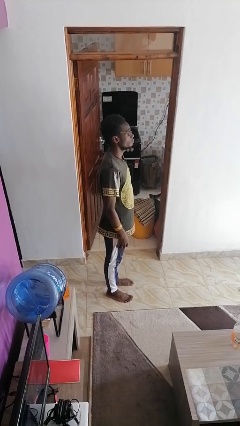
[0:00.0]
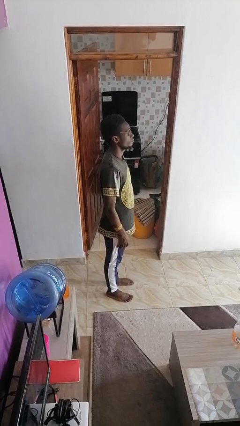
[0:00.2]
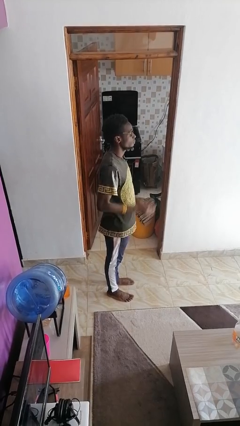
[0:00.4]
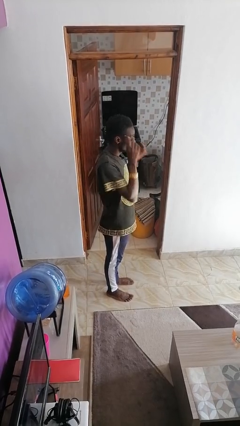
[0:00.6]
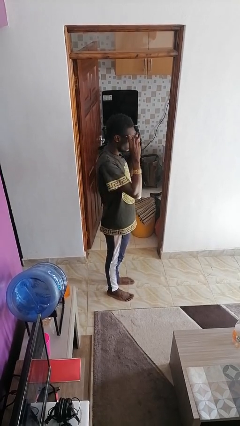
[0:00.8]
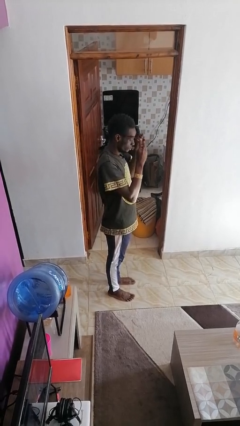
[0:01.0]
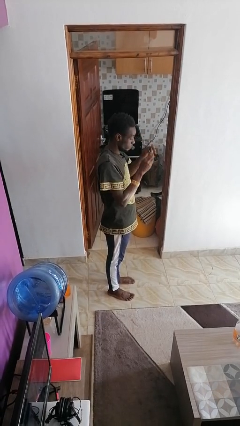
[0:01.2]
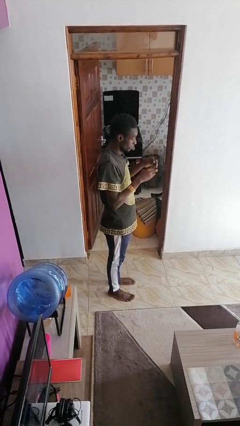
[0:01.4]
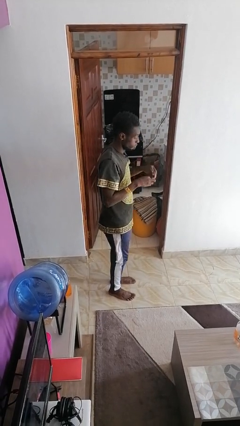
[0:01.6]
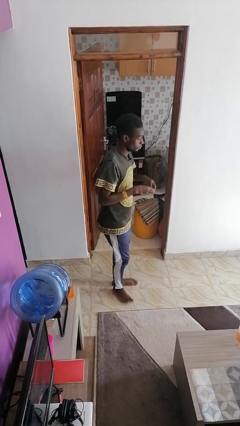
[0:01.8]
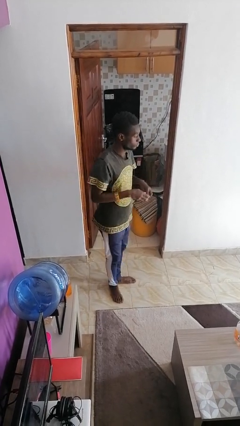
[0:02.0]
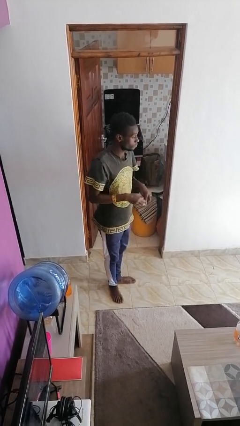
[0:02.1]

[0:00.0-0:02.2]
person takes off glasses

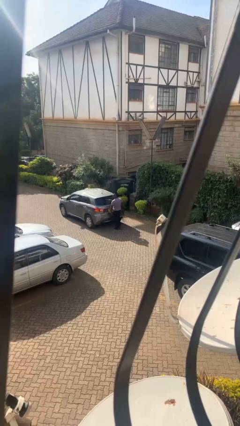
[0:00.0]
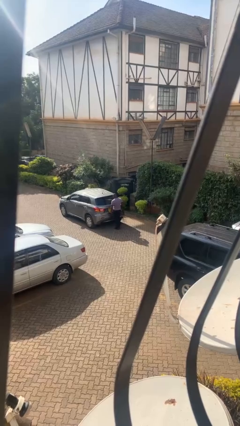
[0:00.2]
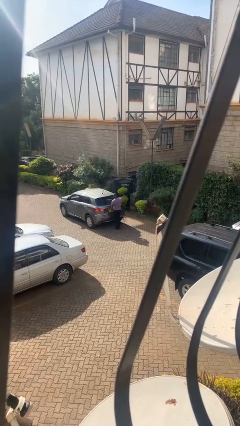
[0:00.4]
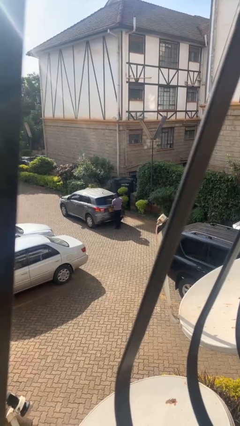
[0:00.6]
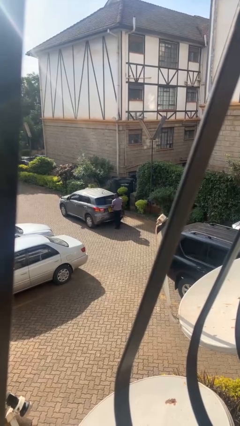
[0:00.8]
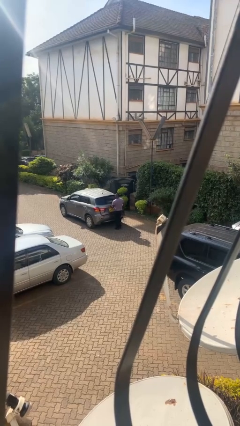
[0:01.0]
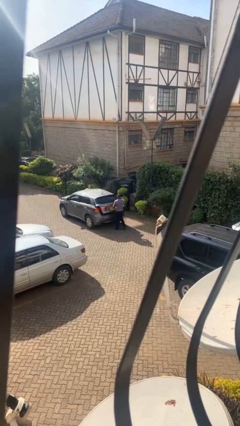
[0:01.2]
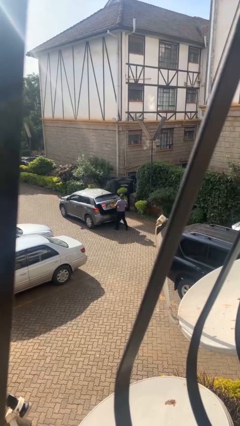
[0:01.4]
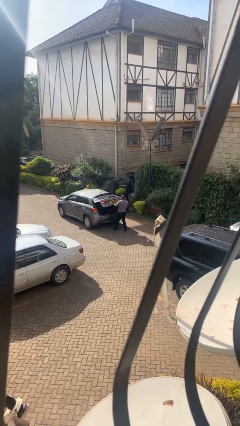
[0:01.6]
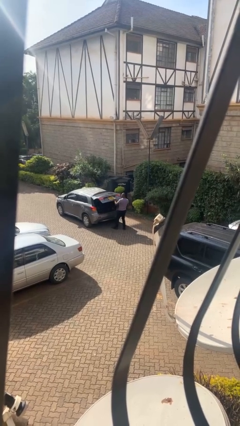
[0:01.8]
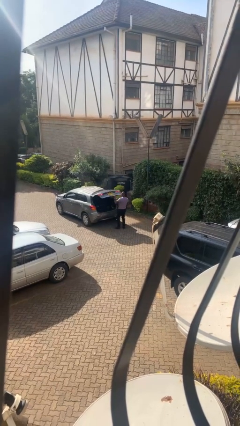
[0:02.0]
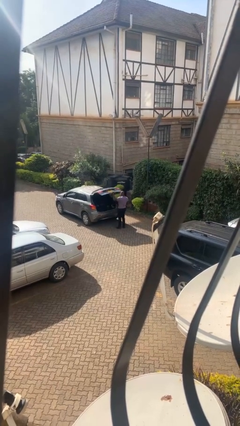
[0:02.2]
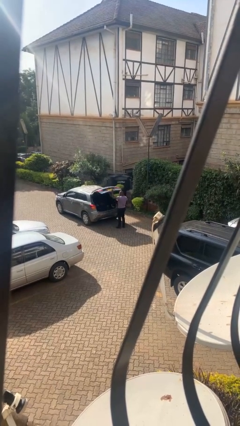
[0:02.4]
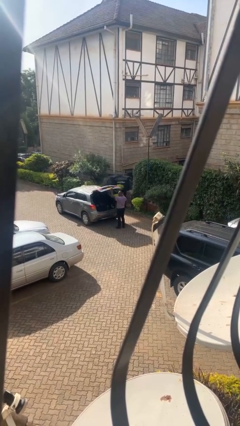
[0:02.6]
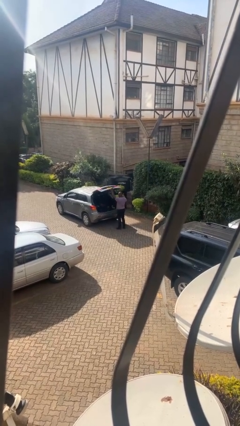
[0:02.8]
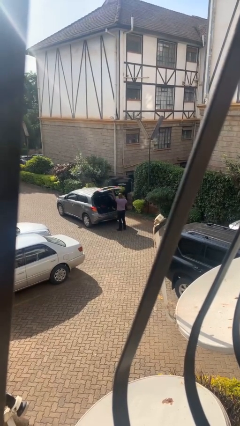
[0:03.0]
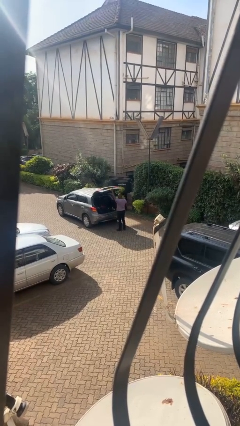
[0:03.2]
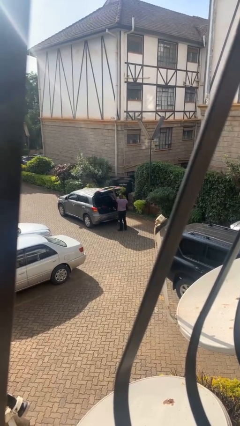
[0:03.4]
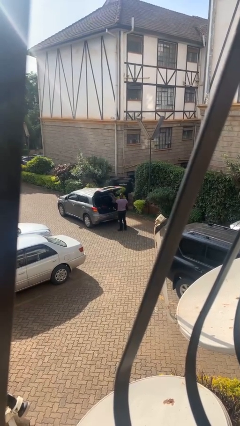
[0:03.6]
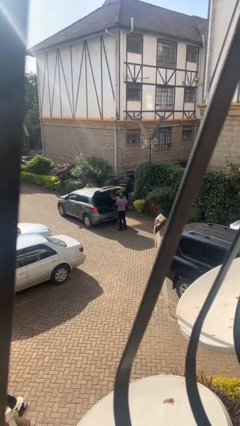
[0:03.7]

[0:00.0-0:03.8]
person opens car trunk

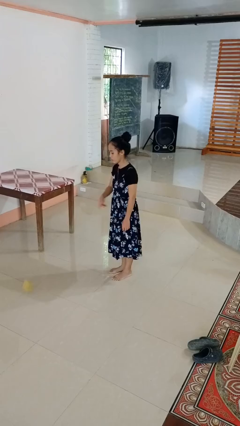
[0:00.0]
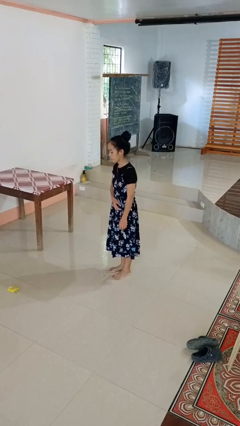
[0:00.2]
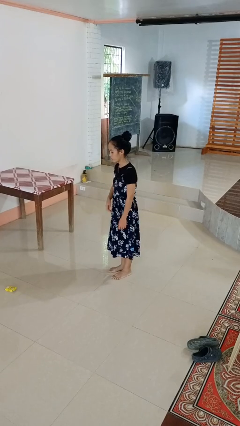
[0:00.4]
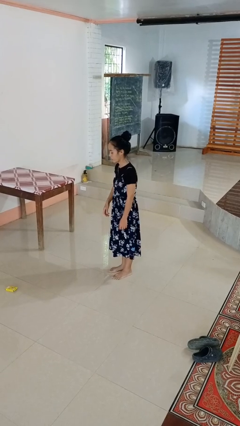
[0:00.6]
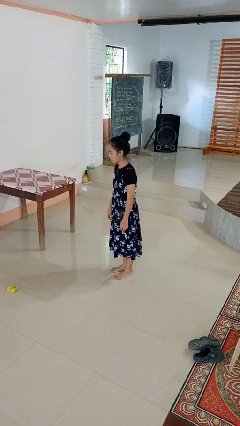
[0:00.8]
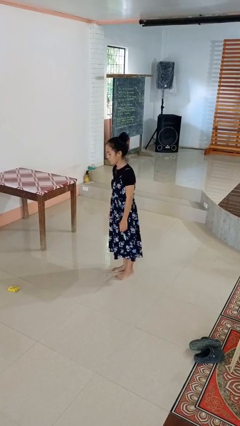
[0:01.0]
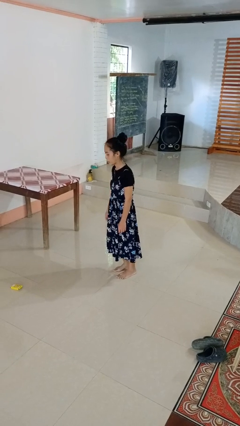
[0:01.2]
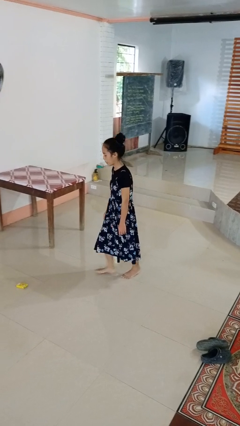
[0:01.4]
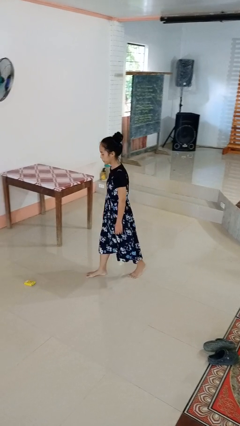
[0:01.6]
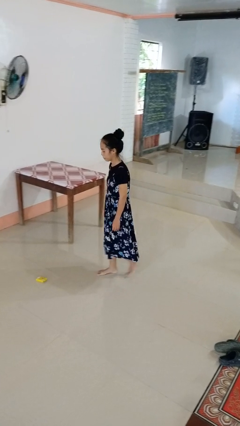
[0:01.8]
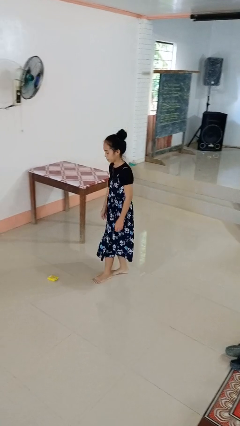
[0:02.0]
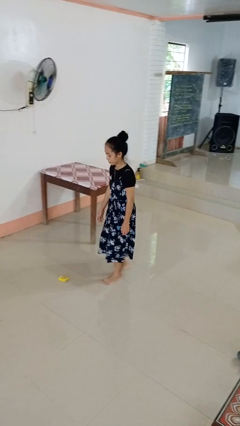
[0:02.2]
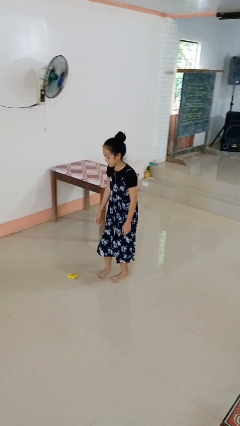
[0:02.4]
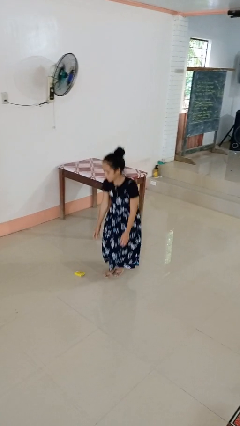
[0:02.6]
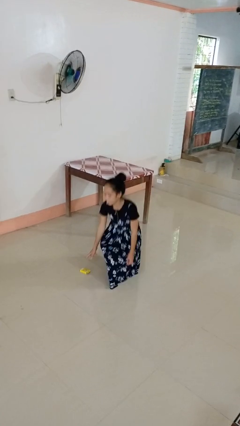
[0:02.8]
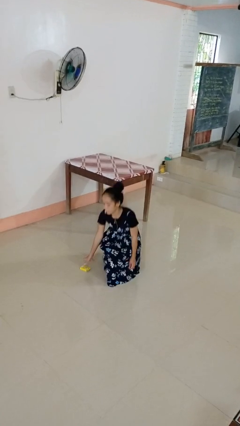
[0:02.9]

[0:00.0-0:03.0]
person throws object to ground

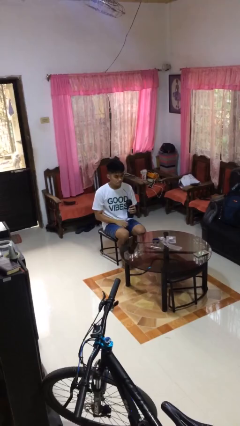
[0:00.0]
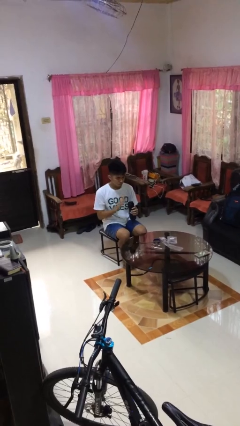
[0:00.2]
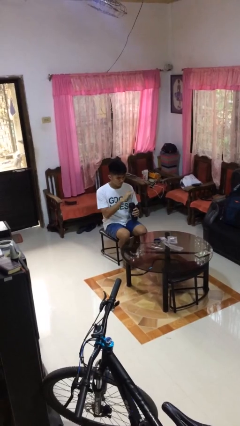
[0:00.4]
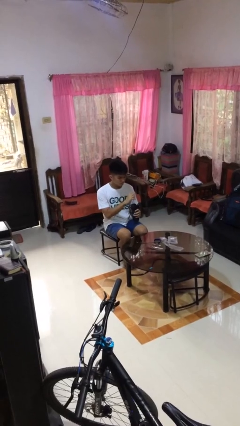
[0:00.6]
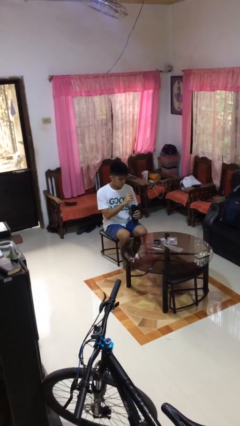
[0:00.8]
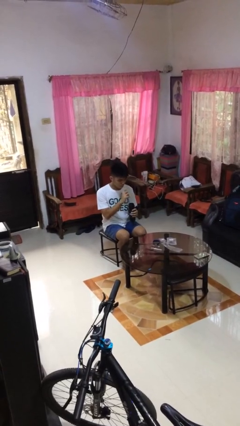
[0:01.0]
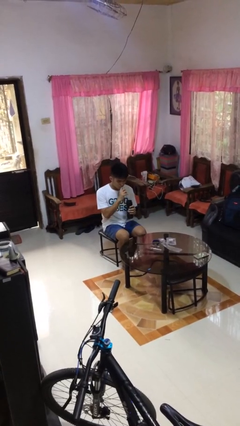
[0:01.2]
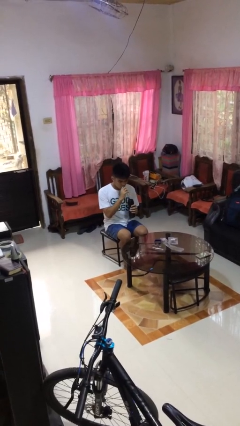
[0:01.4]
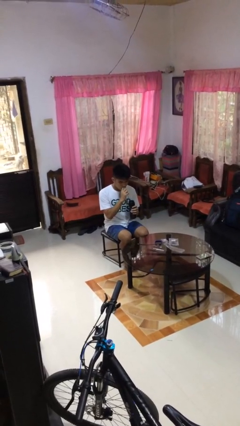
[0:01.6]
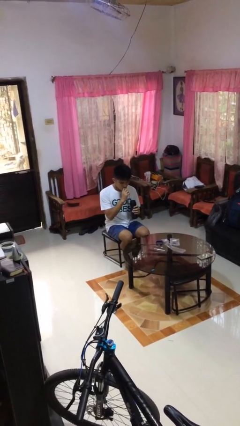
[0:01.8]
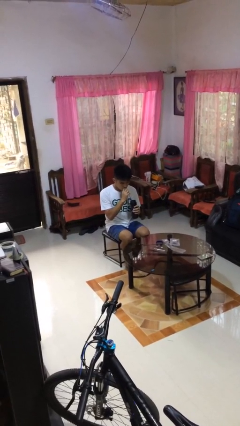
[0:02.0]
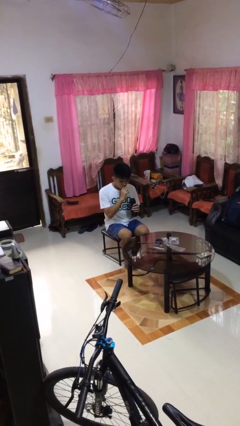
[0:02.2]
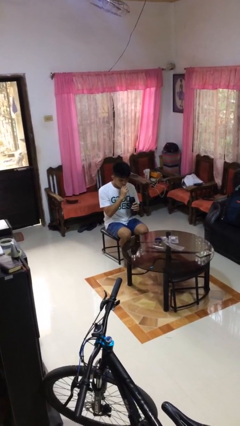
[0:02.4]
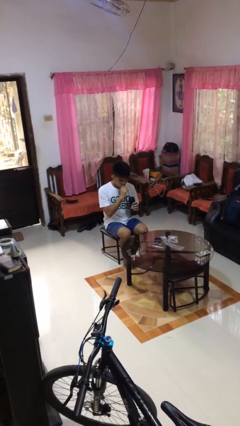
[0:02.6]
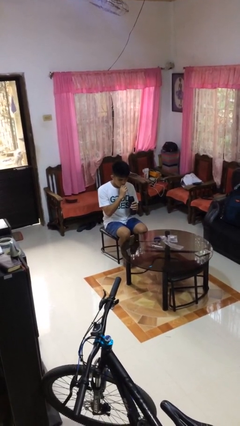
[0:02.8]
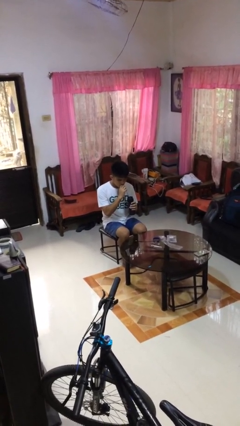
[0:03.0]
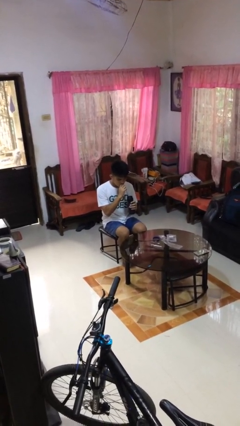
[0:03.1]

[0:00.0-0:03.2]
person drinks from straw

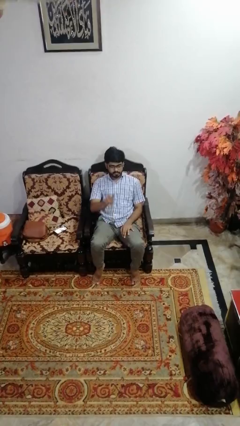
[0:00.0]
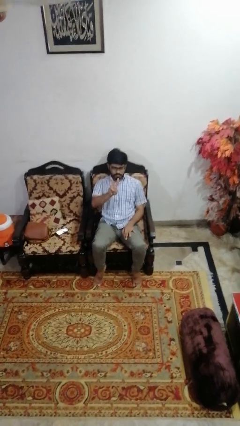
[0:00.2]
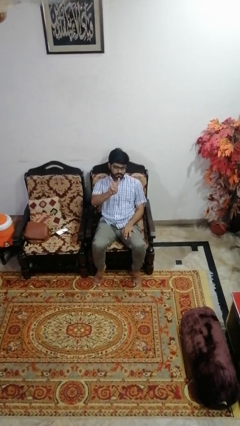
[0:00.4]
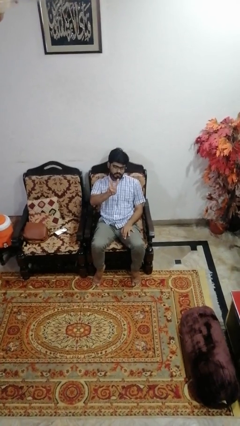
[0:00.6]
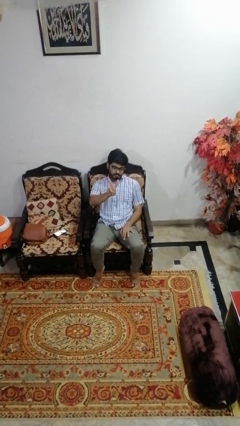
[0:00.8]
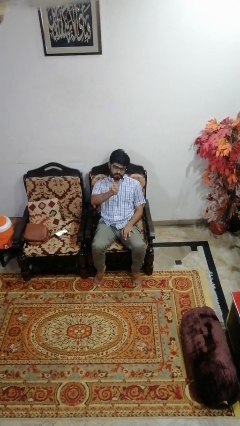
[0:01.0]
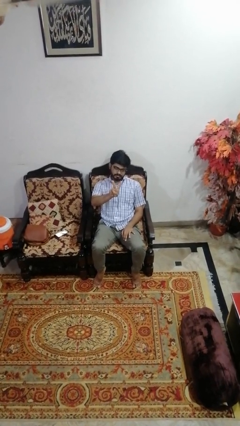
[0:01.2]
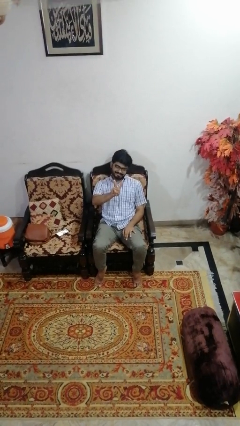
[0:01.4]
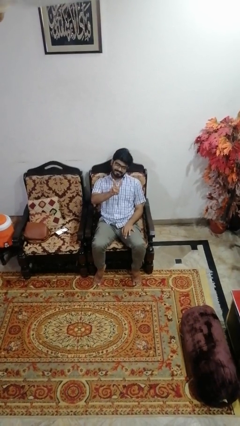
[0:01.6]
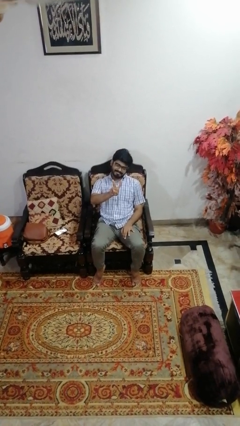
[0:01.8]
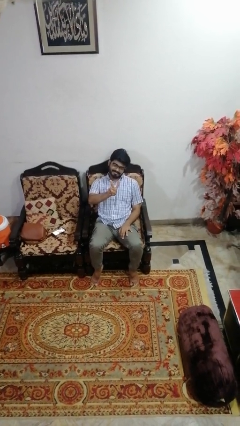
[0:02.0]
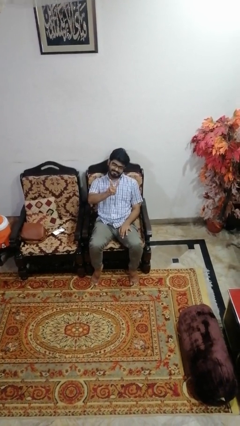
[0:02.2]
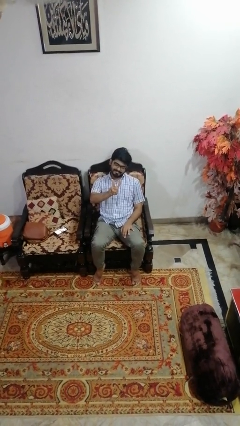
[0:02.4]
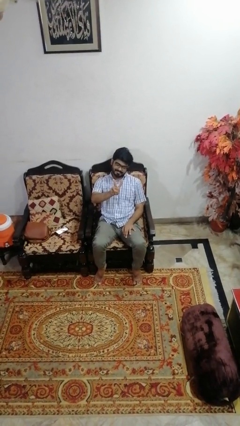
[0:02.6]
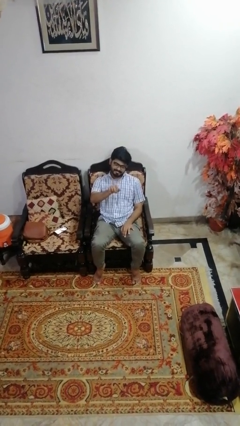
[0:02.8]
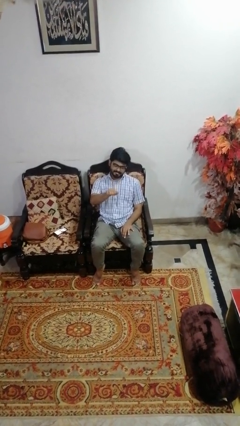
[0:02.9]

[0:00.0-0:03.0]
person gestures peace

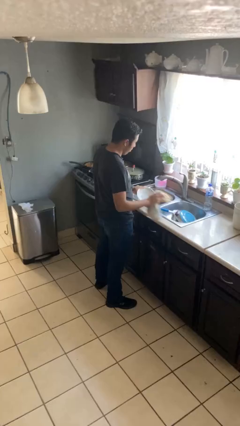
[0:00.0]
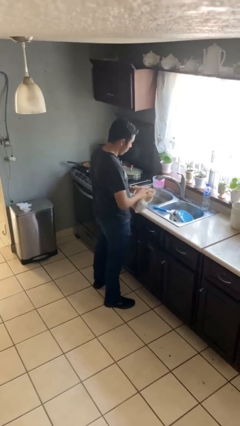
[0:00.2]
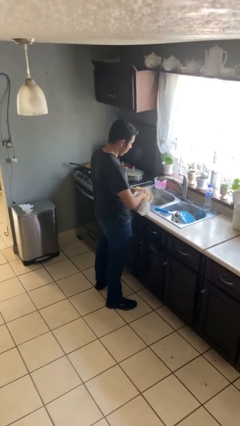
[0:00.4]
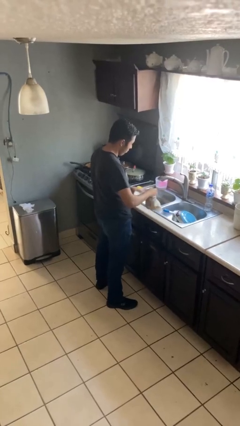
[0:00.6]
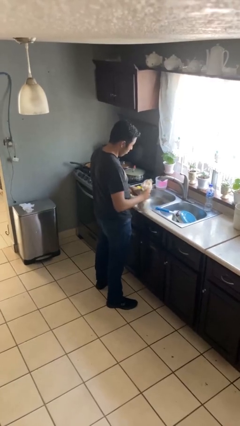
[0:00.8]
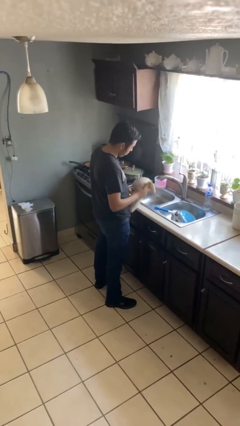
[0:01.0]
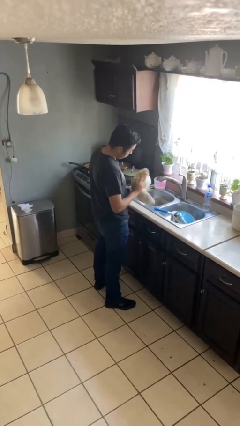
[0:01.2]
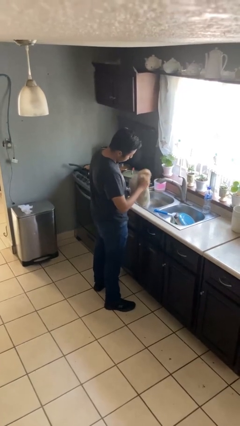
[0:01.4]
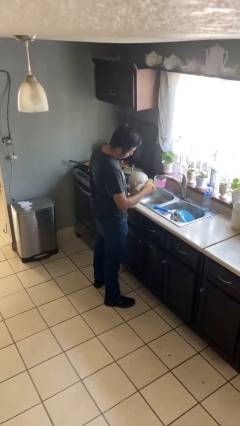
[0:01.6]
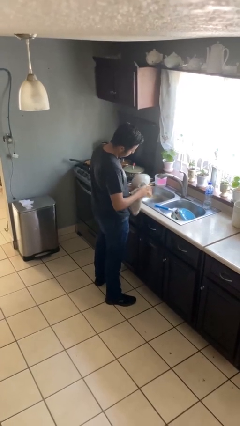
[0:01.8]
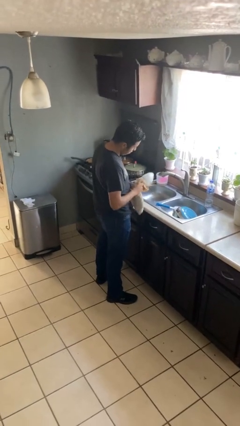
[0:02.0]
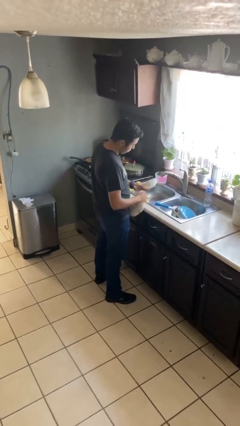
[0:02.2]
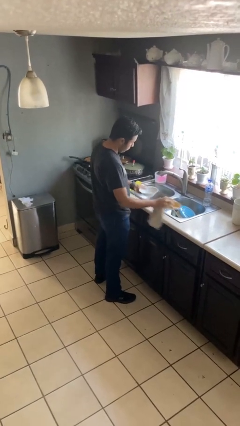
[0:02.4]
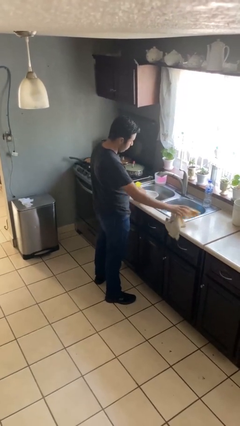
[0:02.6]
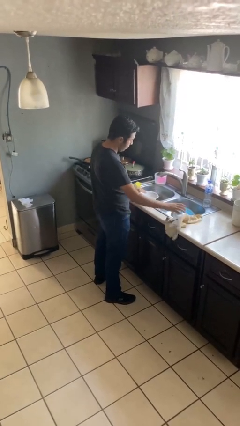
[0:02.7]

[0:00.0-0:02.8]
person dries dish
